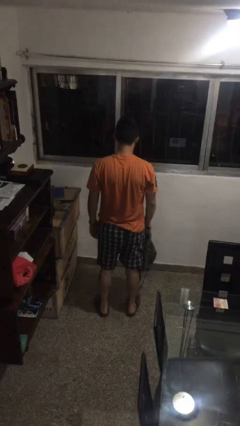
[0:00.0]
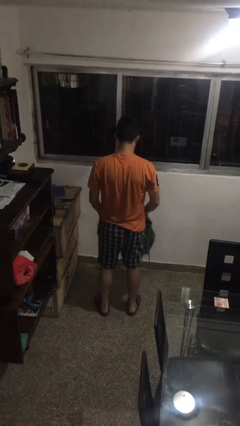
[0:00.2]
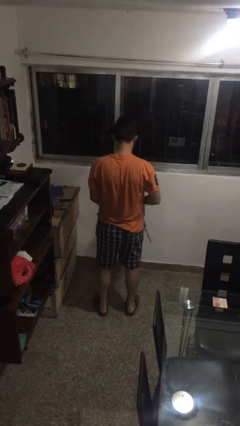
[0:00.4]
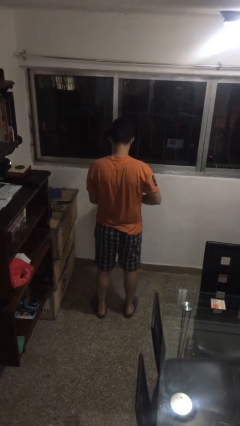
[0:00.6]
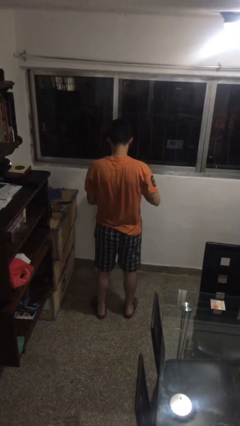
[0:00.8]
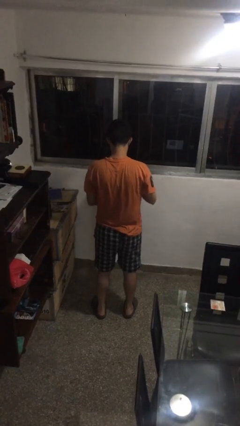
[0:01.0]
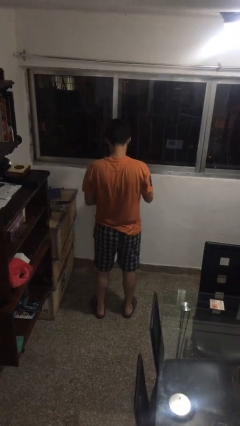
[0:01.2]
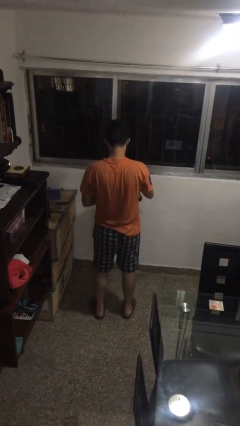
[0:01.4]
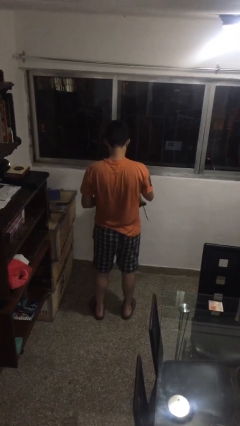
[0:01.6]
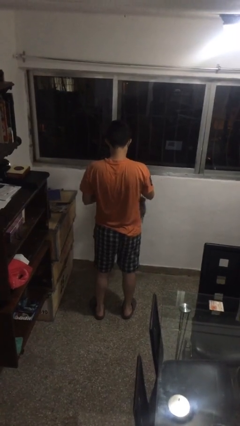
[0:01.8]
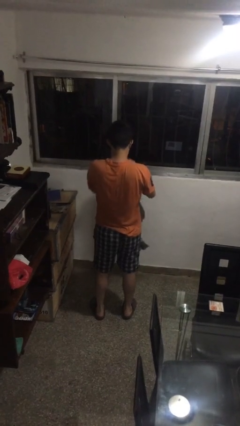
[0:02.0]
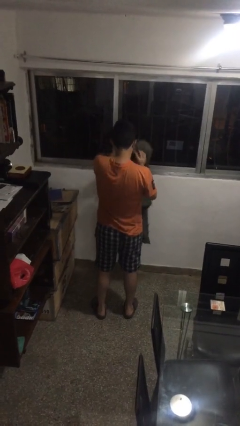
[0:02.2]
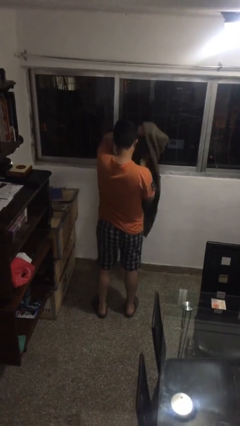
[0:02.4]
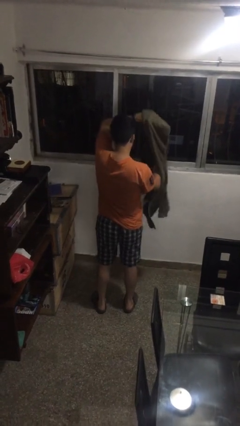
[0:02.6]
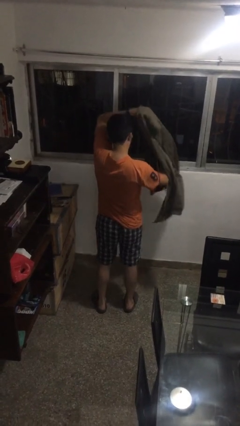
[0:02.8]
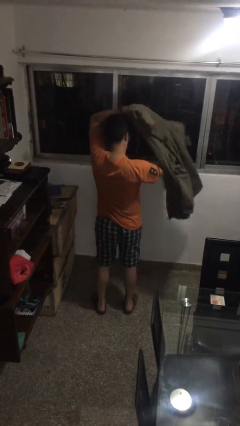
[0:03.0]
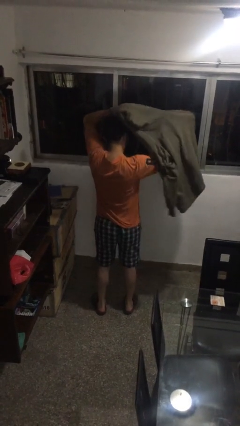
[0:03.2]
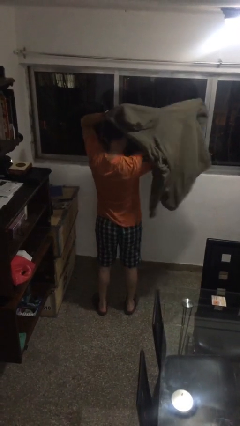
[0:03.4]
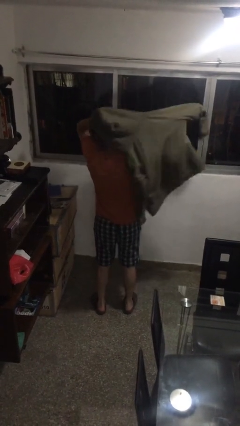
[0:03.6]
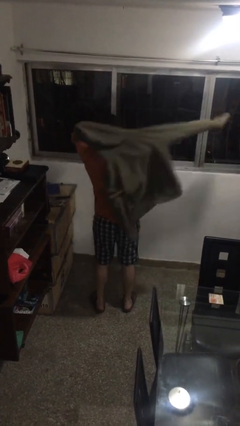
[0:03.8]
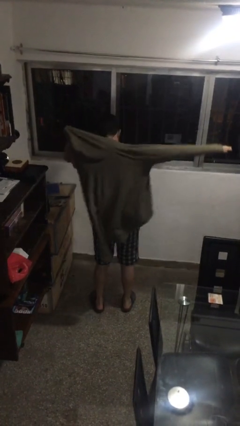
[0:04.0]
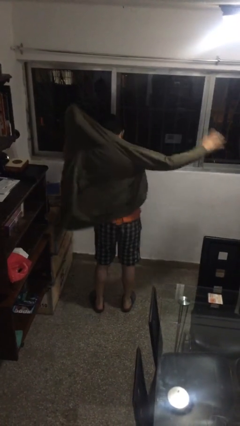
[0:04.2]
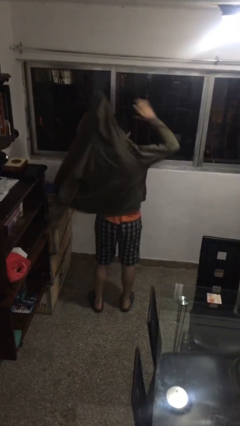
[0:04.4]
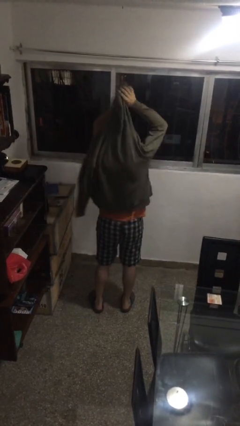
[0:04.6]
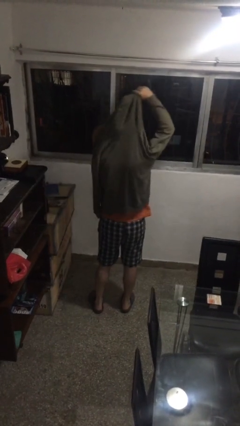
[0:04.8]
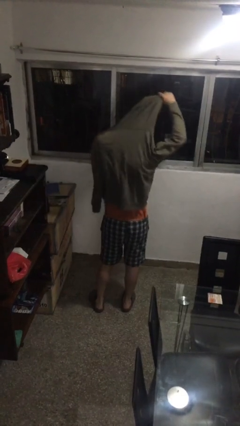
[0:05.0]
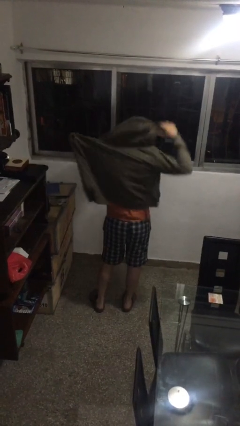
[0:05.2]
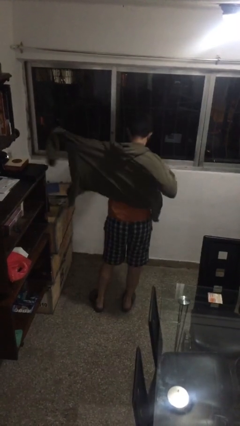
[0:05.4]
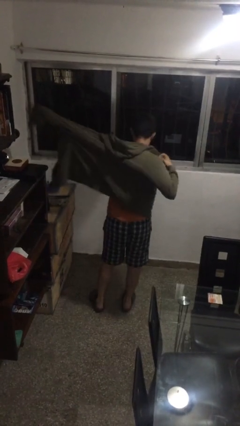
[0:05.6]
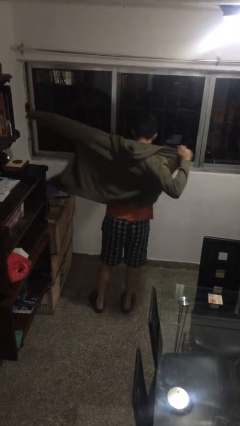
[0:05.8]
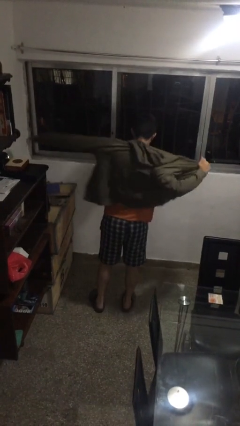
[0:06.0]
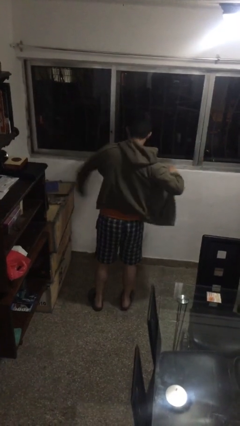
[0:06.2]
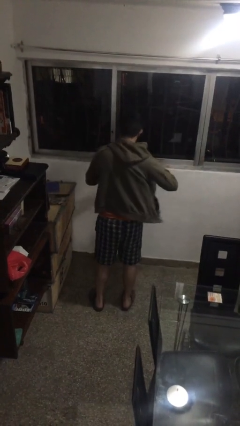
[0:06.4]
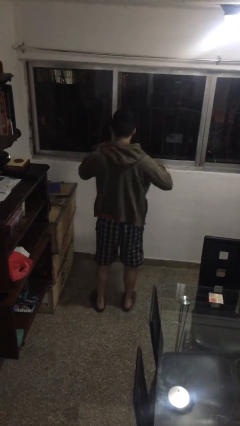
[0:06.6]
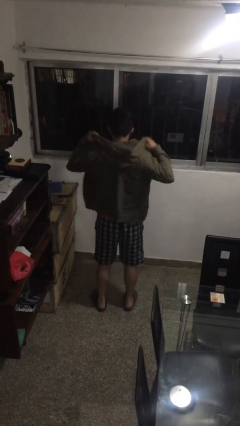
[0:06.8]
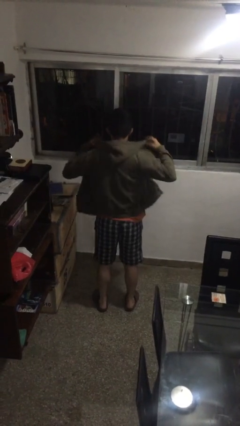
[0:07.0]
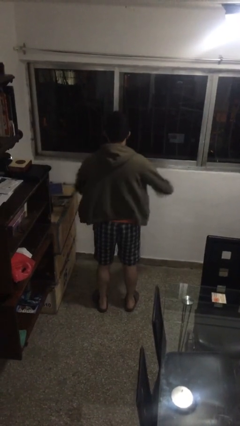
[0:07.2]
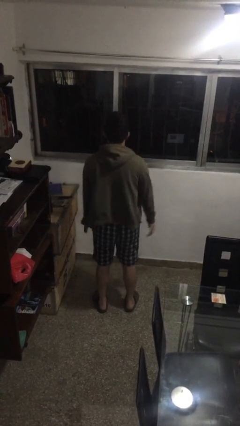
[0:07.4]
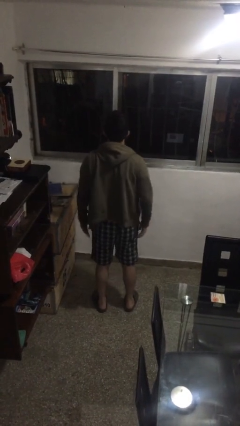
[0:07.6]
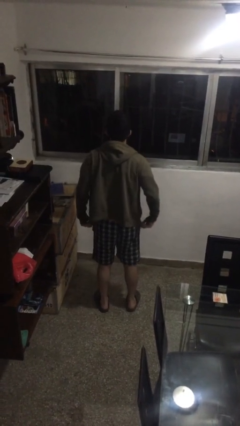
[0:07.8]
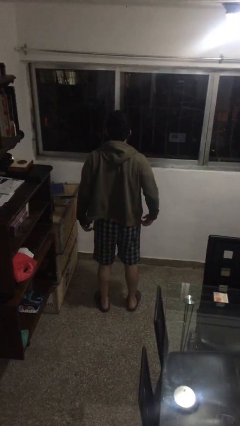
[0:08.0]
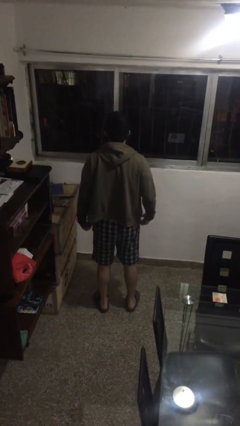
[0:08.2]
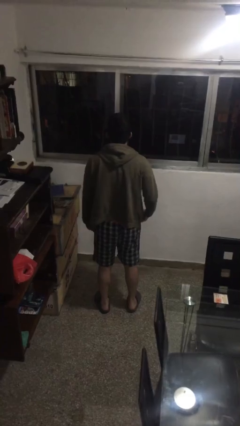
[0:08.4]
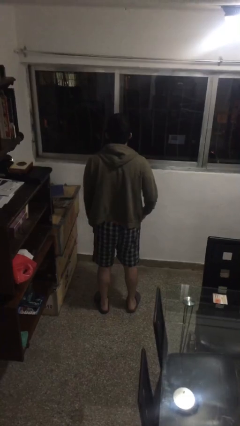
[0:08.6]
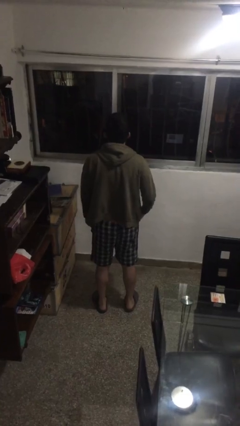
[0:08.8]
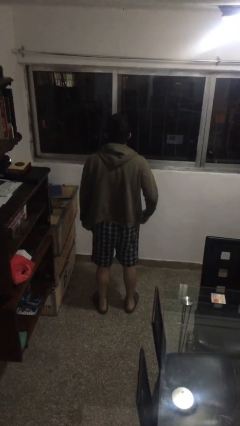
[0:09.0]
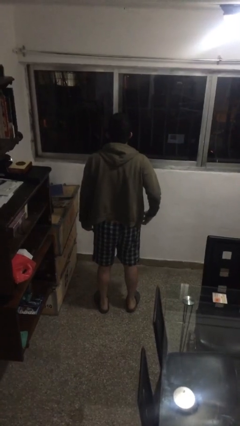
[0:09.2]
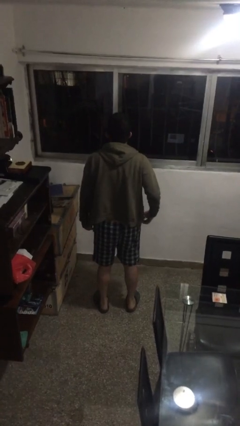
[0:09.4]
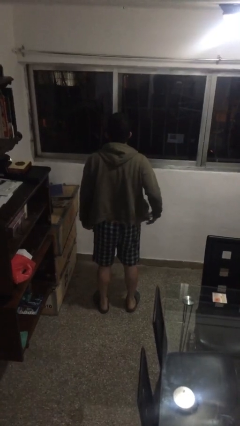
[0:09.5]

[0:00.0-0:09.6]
person puts on jacket

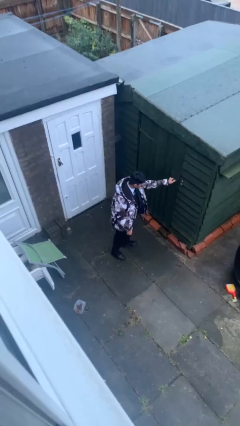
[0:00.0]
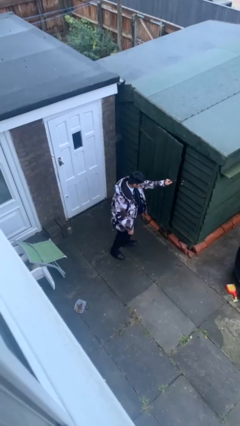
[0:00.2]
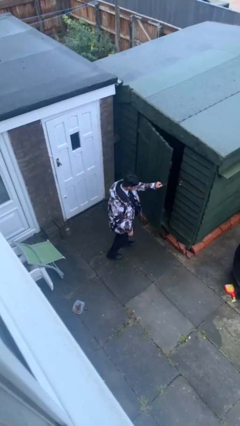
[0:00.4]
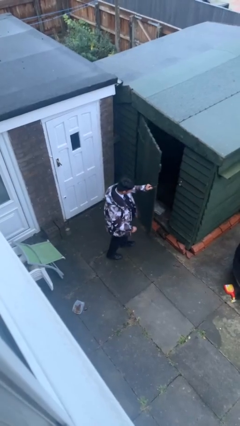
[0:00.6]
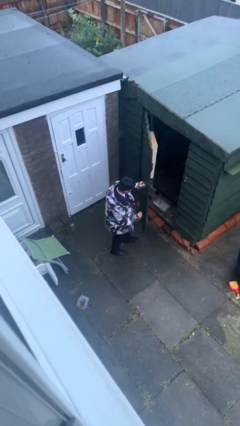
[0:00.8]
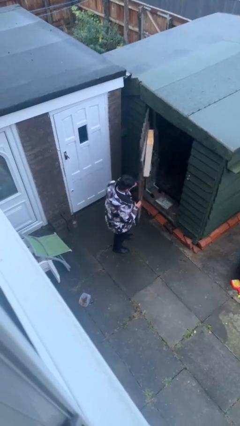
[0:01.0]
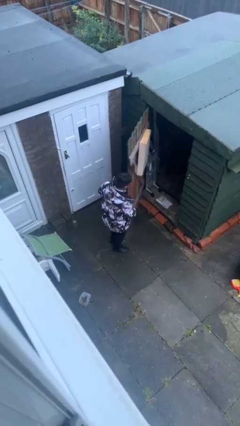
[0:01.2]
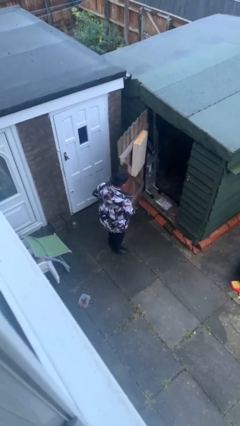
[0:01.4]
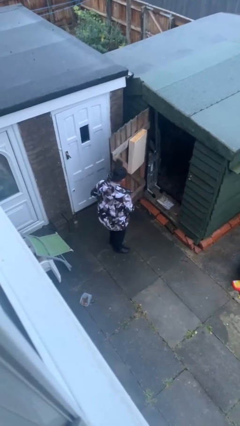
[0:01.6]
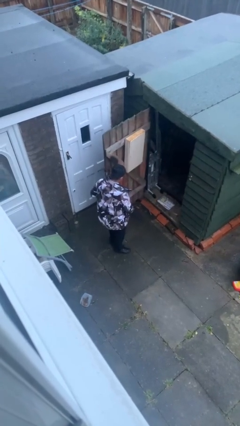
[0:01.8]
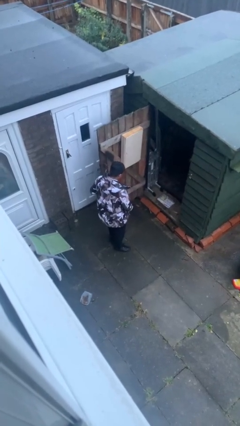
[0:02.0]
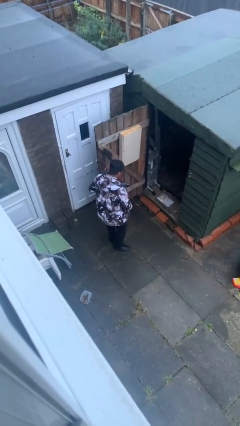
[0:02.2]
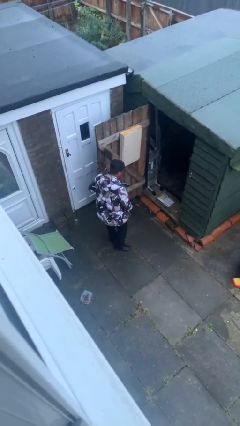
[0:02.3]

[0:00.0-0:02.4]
person opens facility door

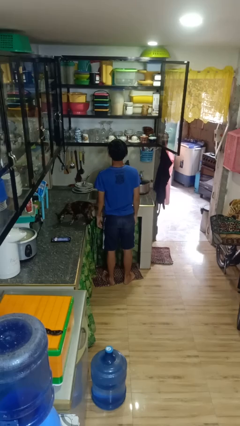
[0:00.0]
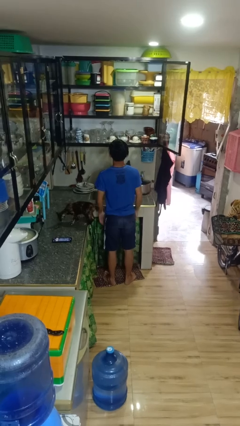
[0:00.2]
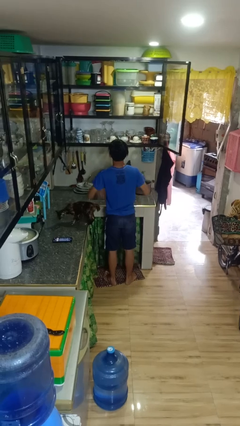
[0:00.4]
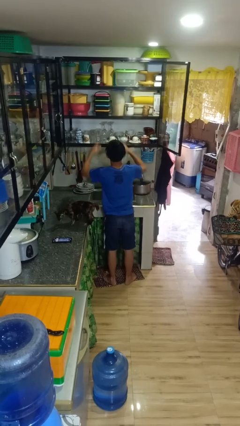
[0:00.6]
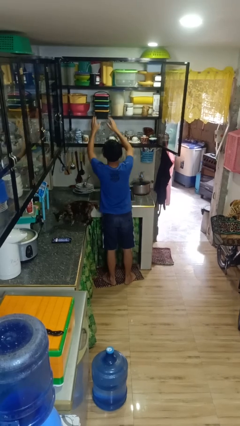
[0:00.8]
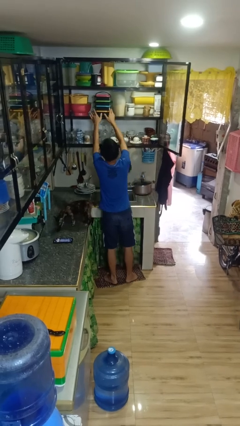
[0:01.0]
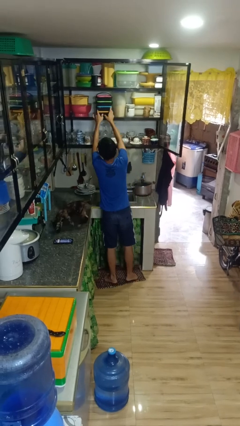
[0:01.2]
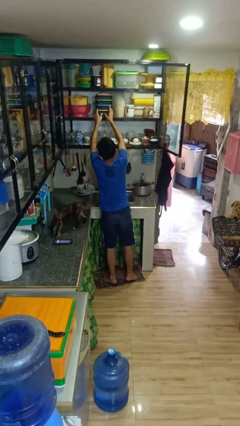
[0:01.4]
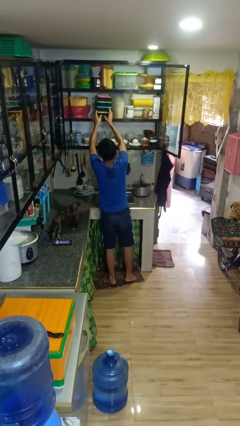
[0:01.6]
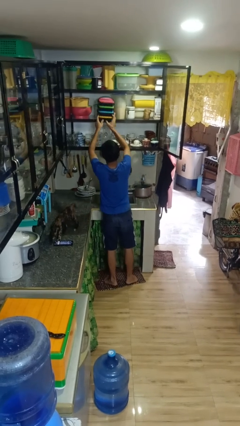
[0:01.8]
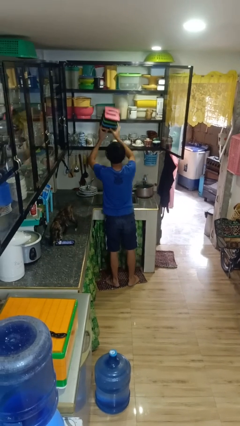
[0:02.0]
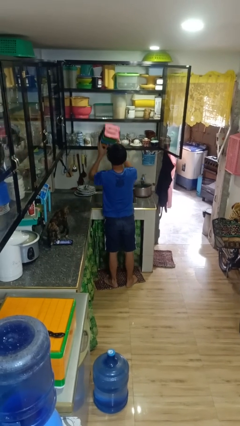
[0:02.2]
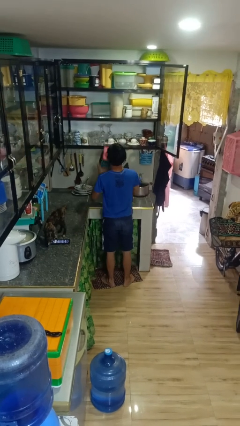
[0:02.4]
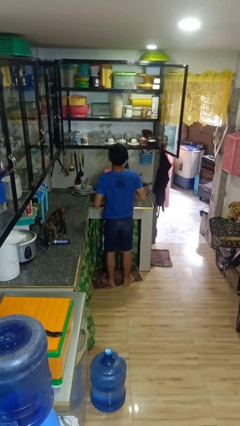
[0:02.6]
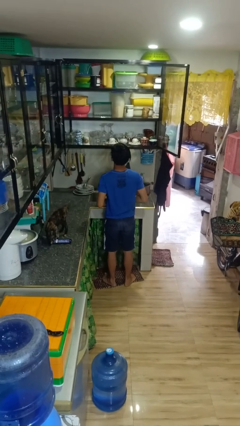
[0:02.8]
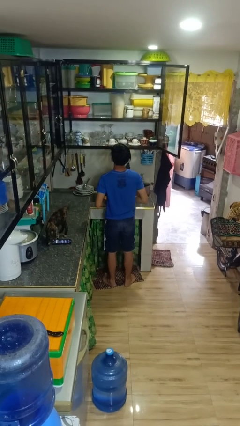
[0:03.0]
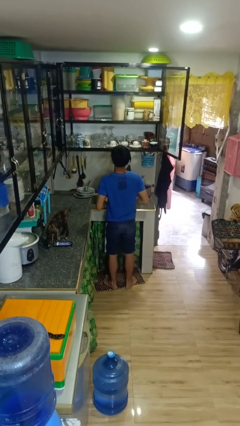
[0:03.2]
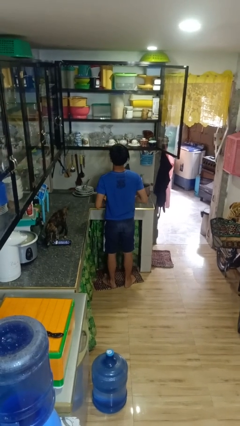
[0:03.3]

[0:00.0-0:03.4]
person picks up object from cabinet

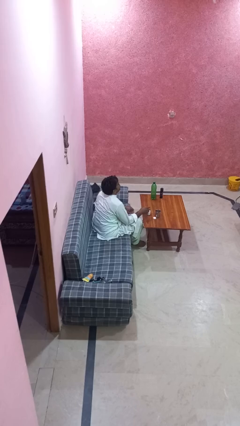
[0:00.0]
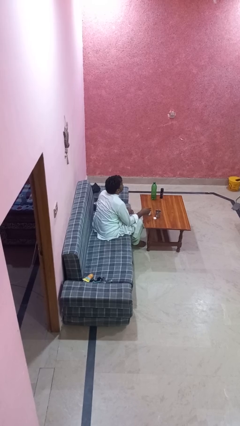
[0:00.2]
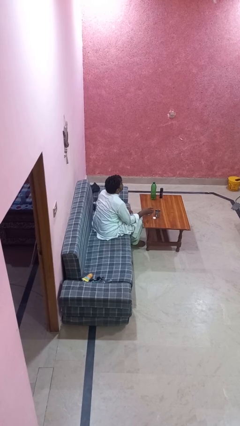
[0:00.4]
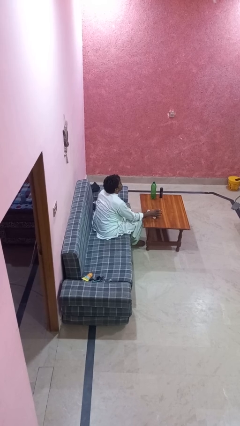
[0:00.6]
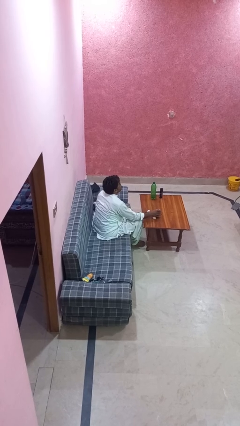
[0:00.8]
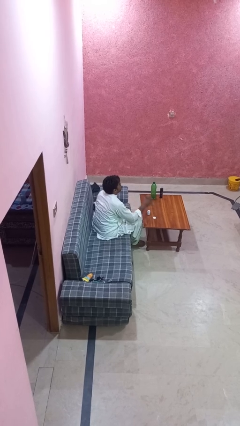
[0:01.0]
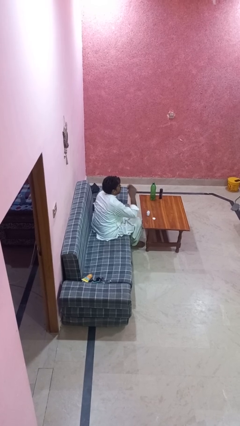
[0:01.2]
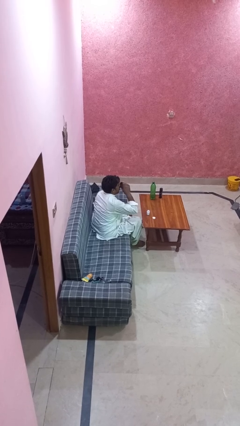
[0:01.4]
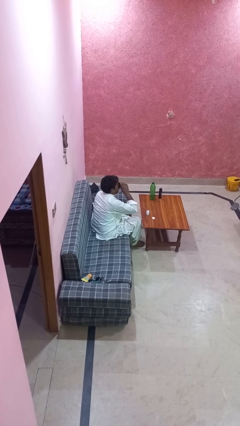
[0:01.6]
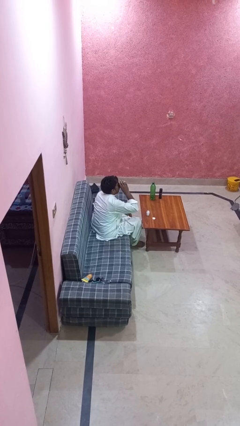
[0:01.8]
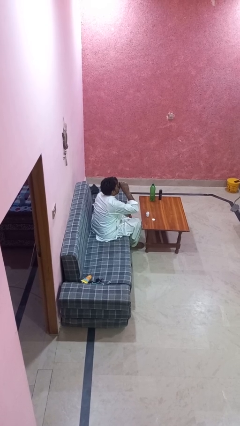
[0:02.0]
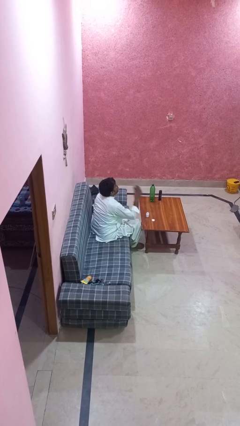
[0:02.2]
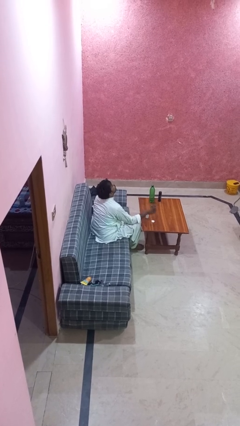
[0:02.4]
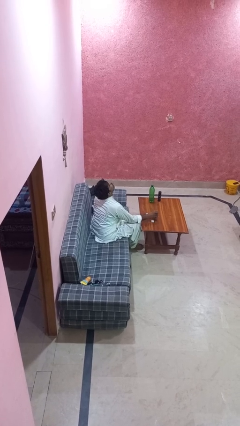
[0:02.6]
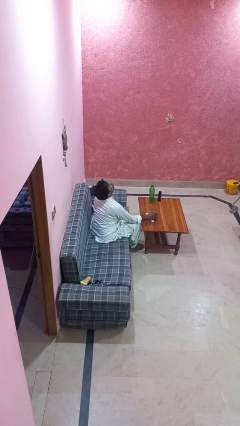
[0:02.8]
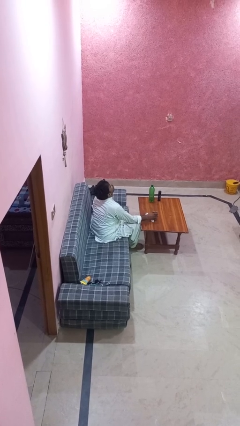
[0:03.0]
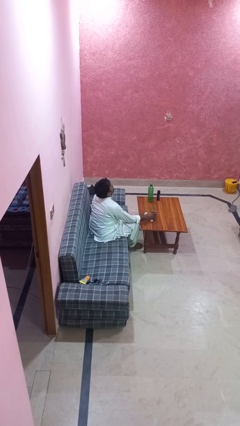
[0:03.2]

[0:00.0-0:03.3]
person drinks from cup
